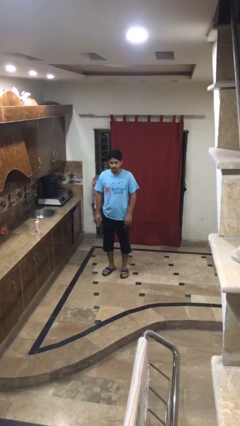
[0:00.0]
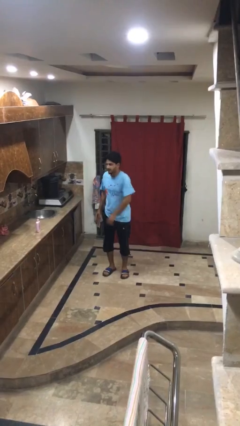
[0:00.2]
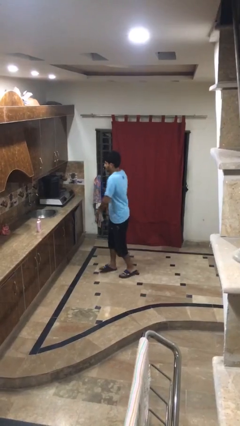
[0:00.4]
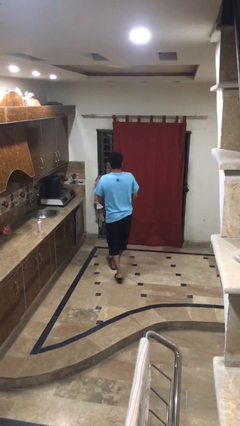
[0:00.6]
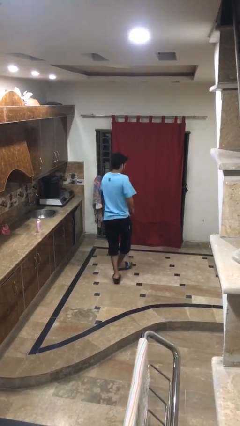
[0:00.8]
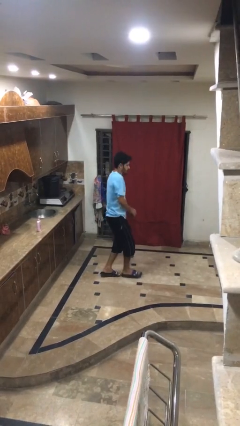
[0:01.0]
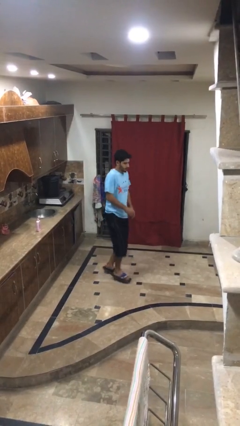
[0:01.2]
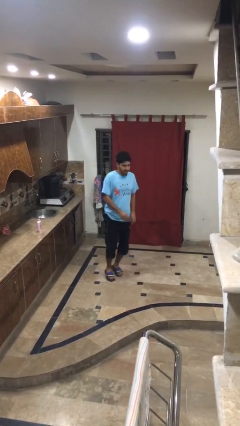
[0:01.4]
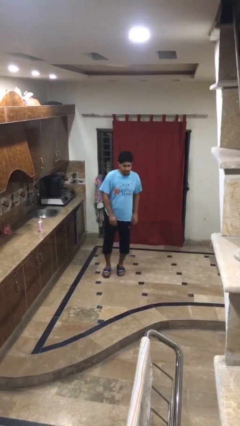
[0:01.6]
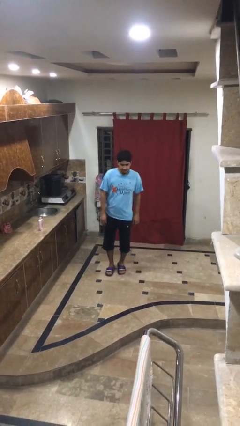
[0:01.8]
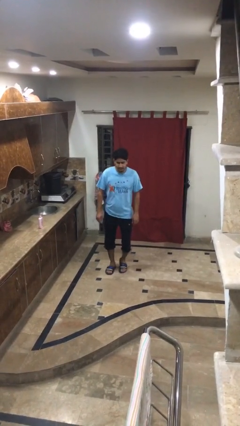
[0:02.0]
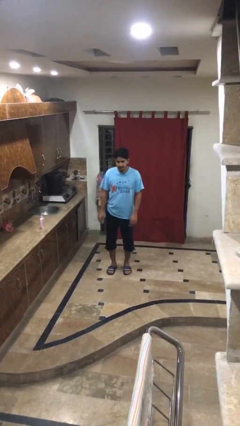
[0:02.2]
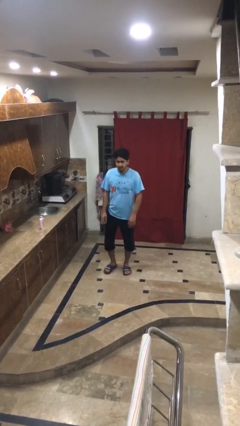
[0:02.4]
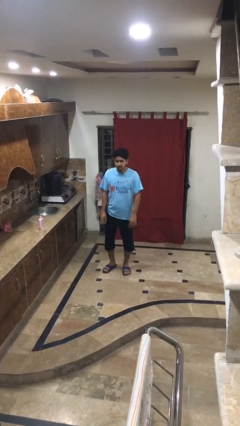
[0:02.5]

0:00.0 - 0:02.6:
person twirls

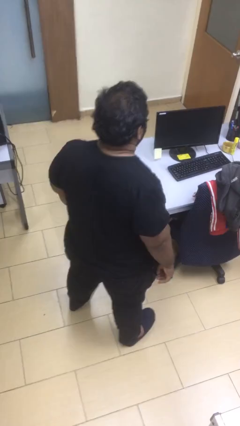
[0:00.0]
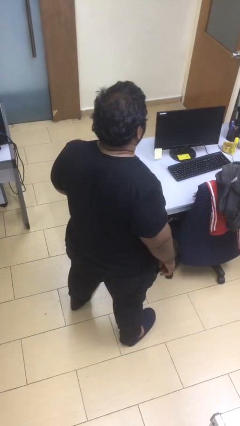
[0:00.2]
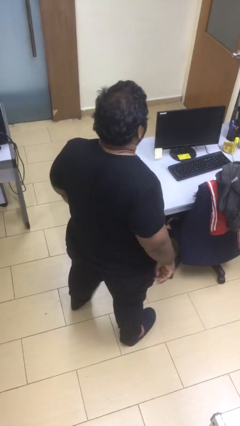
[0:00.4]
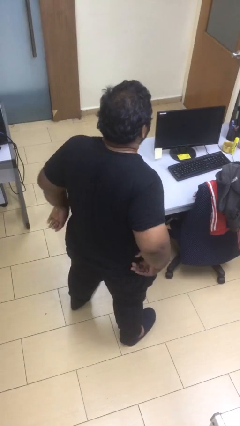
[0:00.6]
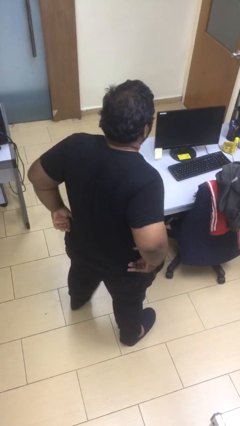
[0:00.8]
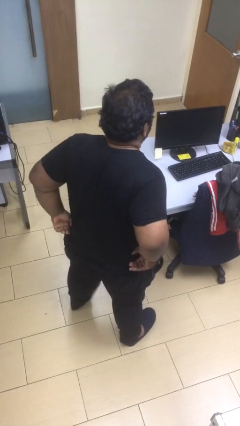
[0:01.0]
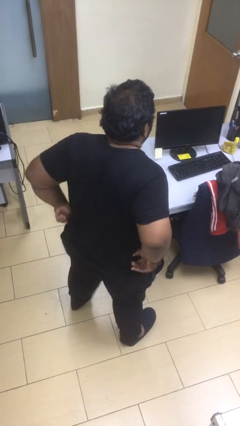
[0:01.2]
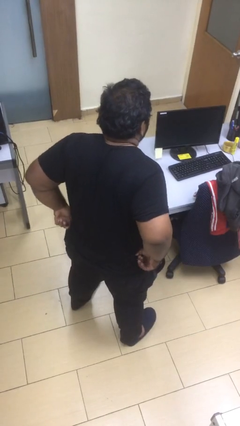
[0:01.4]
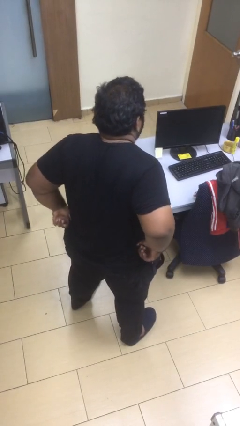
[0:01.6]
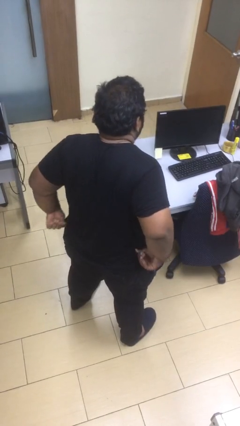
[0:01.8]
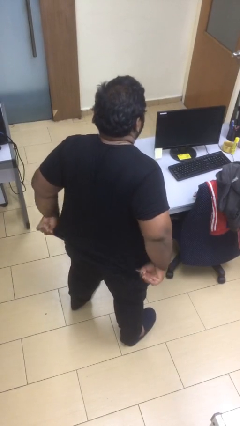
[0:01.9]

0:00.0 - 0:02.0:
person hikes up pants

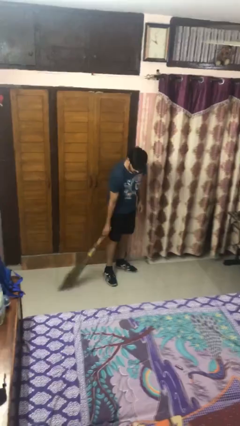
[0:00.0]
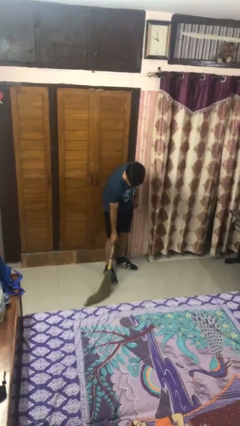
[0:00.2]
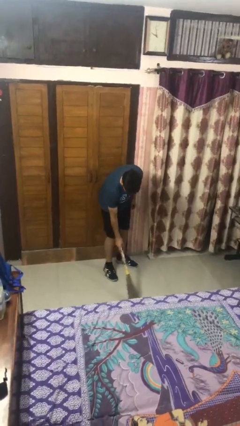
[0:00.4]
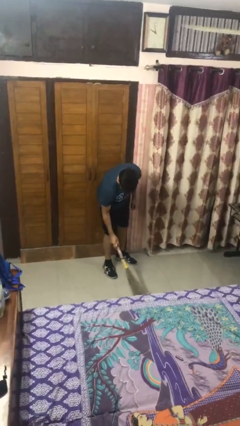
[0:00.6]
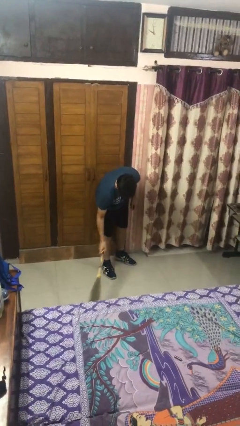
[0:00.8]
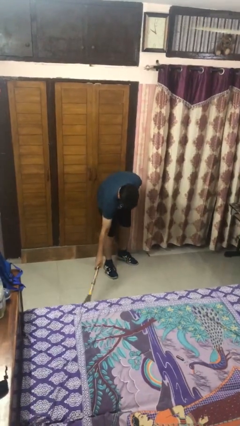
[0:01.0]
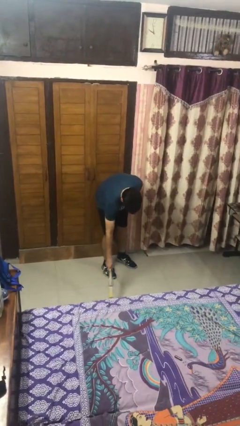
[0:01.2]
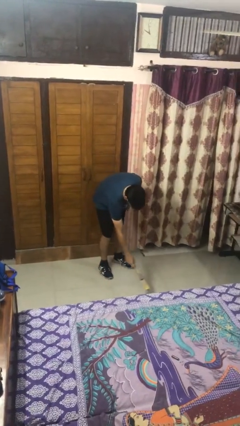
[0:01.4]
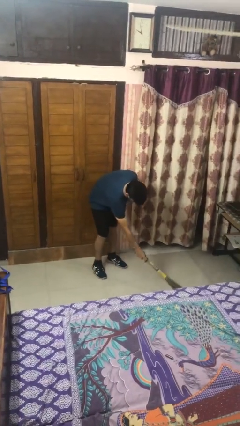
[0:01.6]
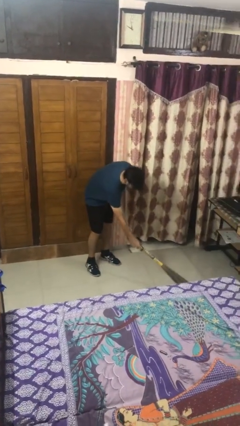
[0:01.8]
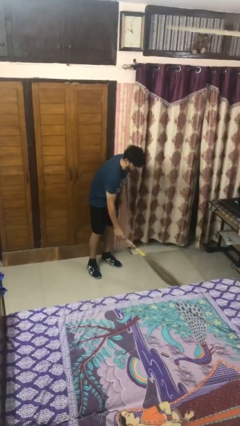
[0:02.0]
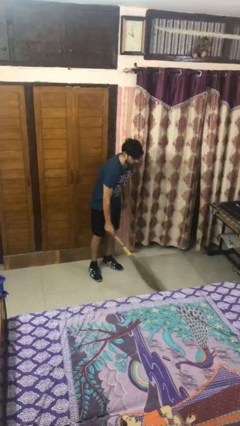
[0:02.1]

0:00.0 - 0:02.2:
person sweeps floor

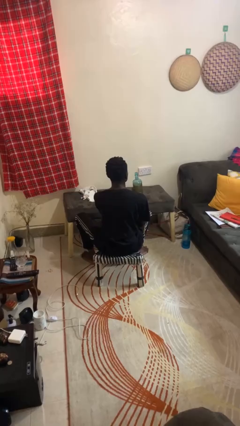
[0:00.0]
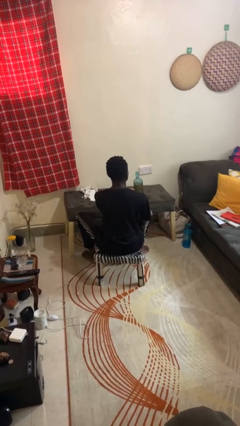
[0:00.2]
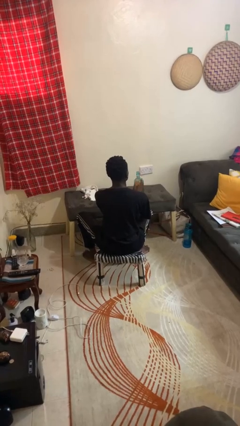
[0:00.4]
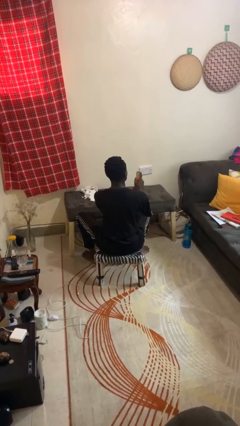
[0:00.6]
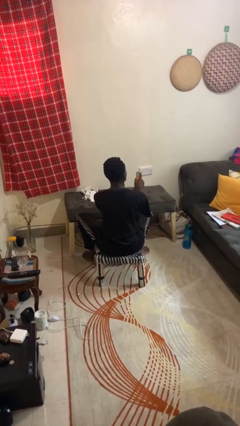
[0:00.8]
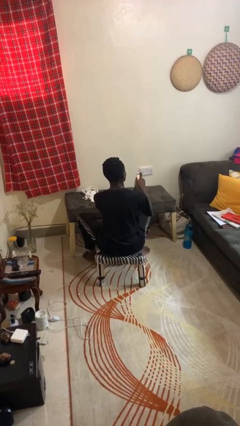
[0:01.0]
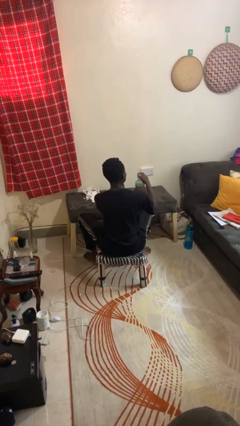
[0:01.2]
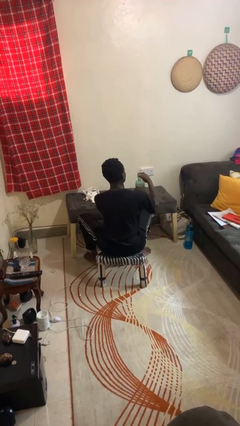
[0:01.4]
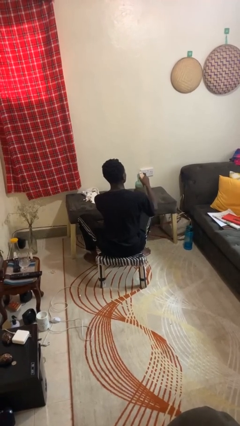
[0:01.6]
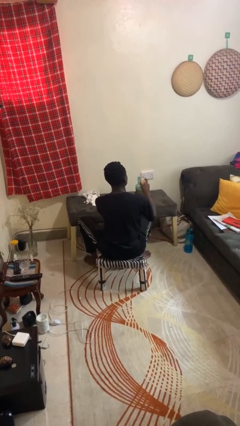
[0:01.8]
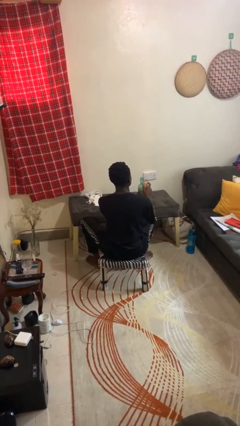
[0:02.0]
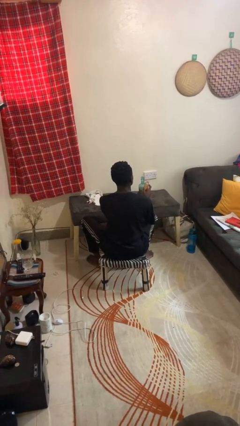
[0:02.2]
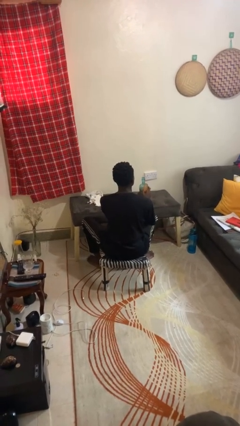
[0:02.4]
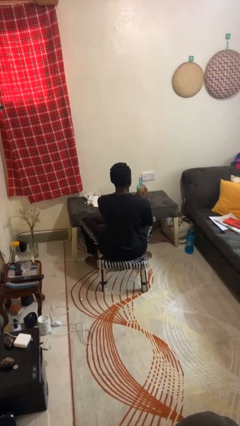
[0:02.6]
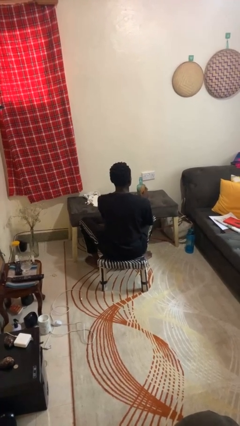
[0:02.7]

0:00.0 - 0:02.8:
person opens can with can opener

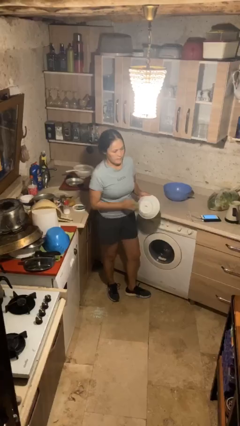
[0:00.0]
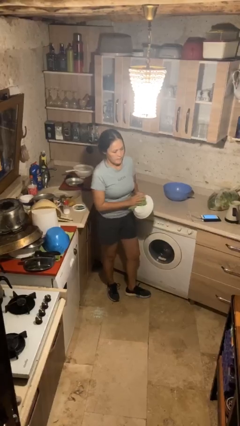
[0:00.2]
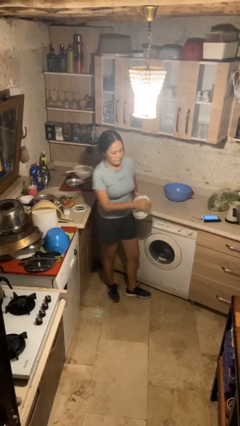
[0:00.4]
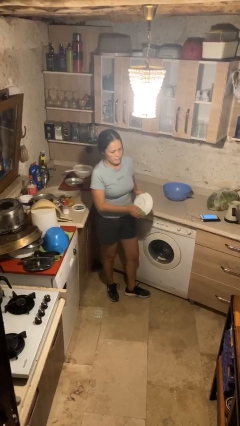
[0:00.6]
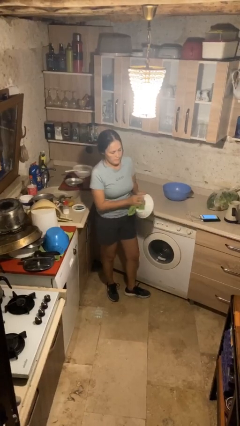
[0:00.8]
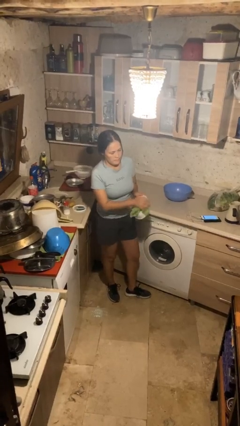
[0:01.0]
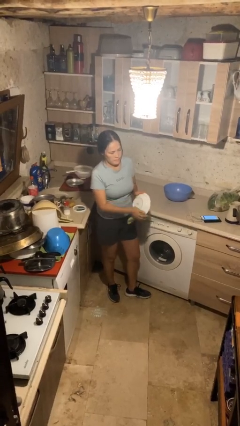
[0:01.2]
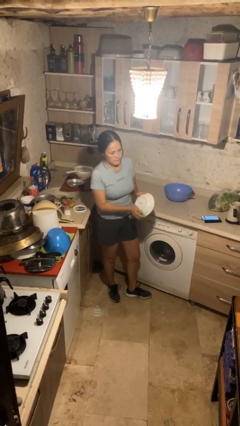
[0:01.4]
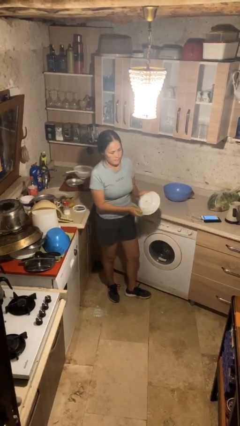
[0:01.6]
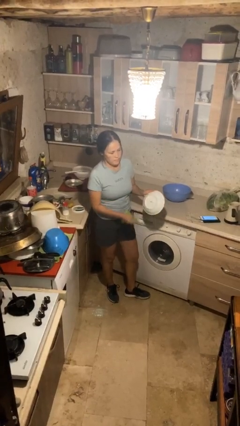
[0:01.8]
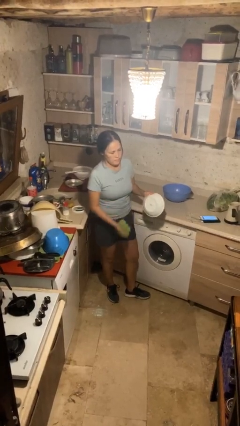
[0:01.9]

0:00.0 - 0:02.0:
person dries dish

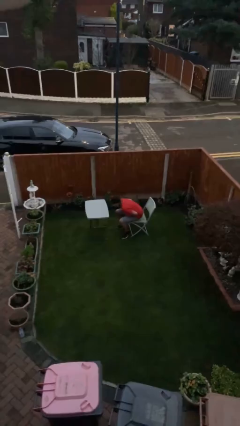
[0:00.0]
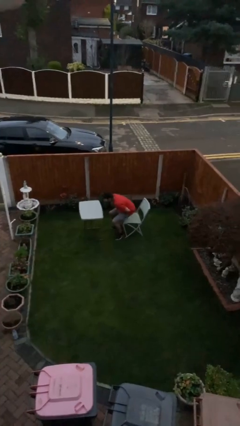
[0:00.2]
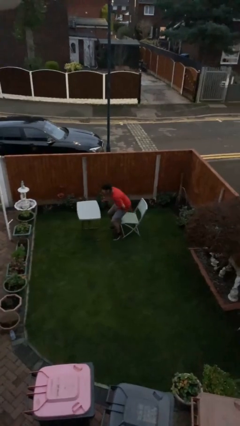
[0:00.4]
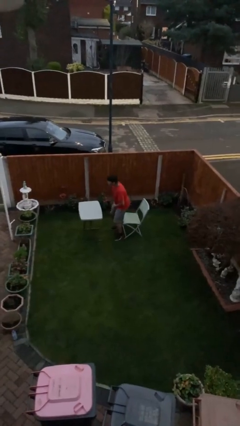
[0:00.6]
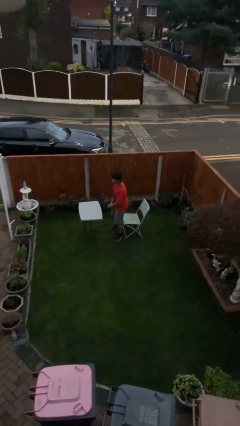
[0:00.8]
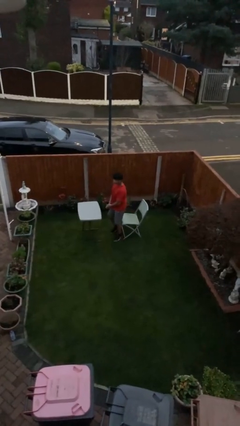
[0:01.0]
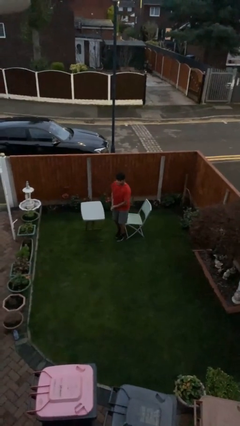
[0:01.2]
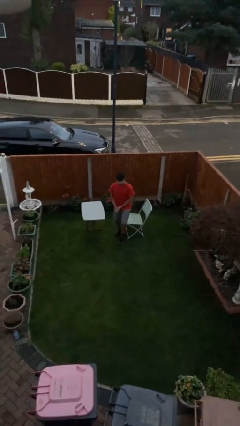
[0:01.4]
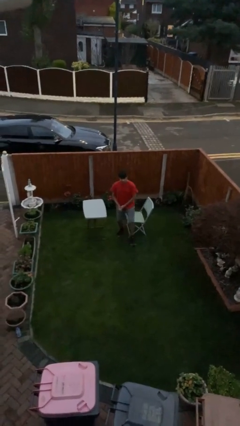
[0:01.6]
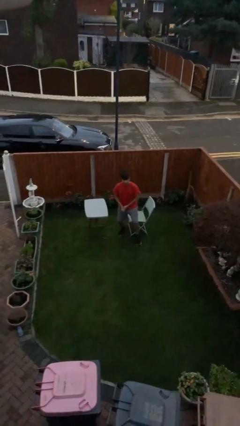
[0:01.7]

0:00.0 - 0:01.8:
person stands up

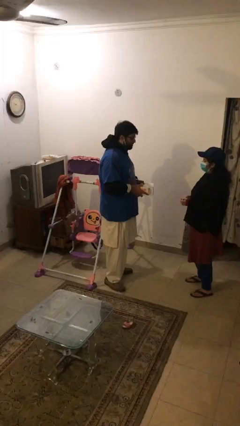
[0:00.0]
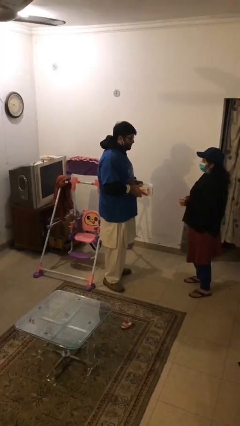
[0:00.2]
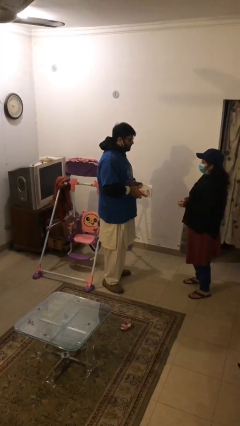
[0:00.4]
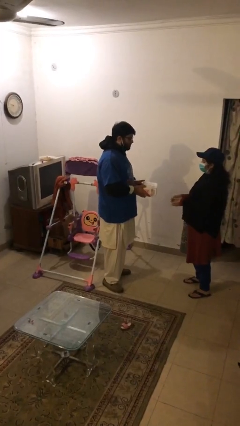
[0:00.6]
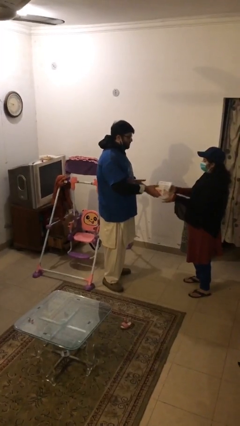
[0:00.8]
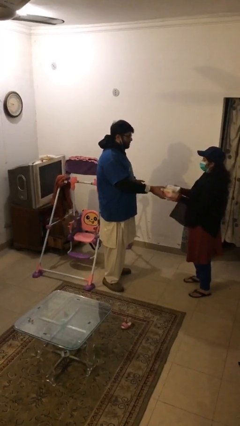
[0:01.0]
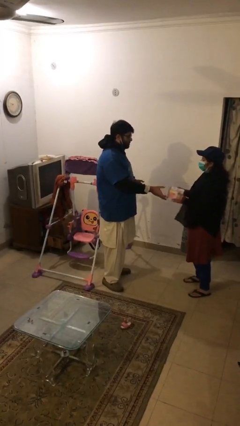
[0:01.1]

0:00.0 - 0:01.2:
person transfers object to person

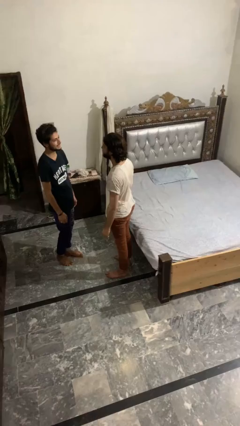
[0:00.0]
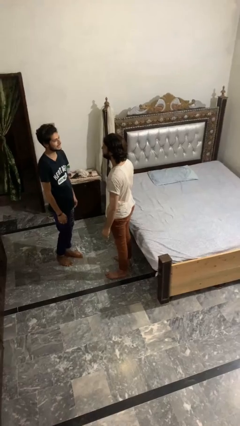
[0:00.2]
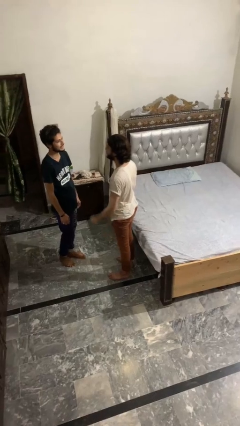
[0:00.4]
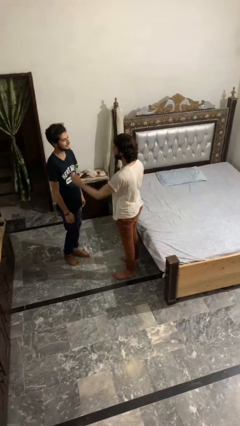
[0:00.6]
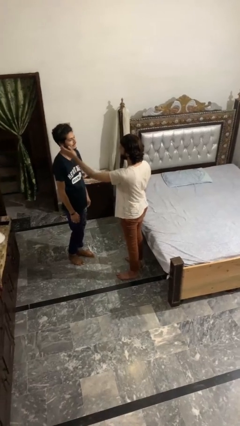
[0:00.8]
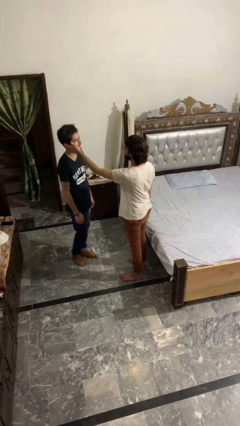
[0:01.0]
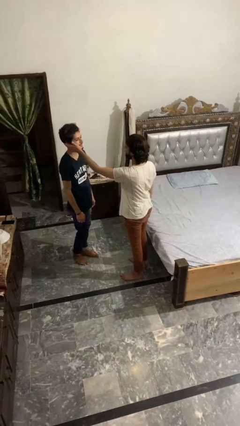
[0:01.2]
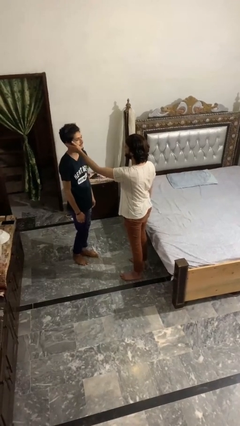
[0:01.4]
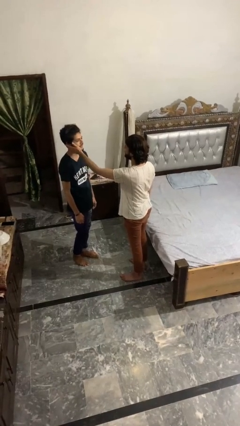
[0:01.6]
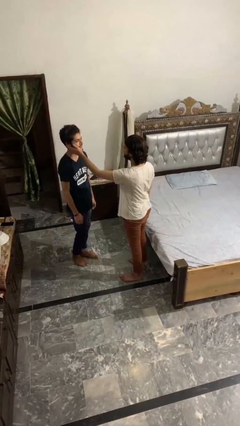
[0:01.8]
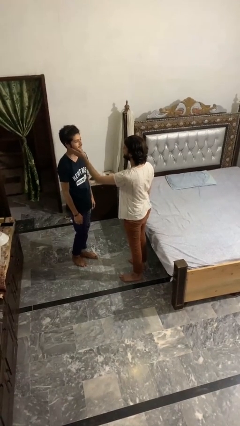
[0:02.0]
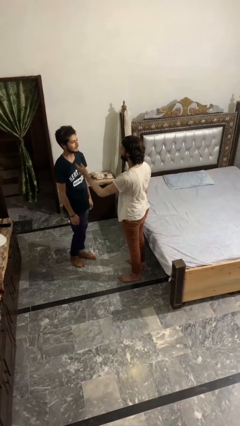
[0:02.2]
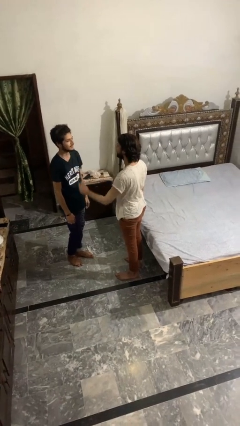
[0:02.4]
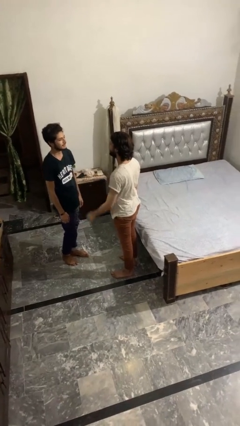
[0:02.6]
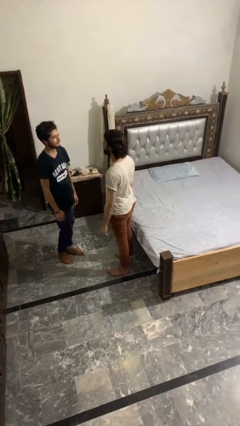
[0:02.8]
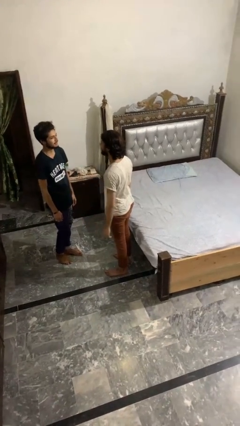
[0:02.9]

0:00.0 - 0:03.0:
person touches face of person
